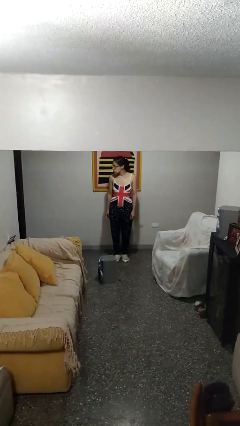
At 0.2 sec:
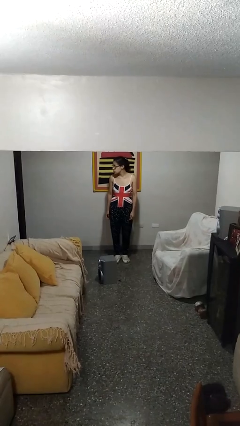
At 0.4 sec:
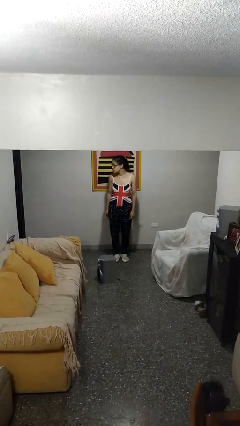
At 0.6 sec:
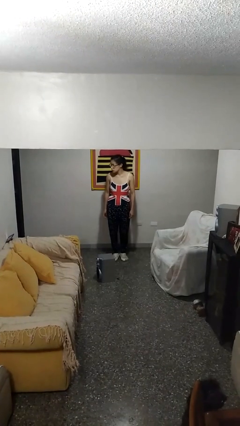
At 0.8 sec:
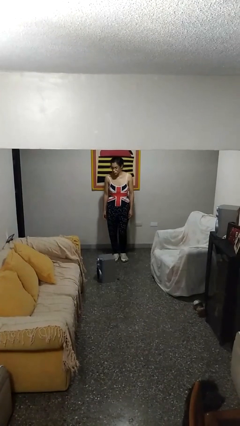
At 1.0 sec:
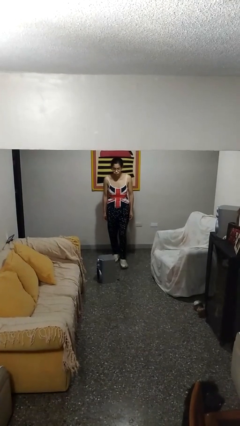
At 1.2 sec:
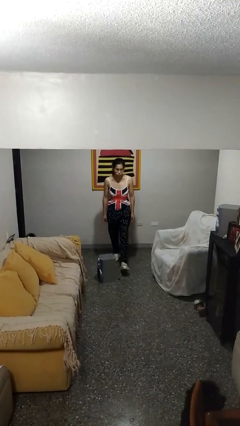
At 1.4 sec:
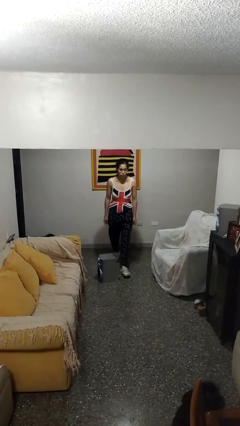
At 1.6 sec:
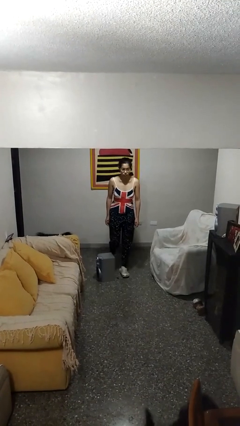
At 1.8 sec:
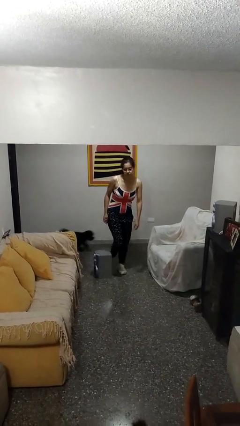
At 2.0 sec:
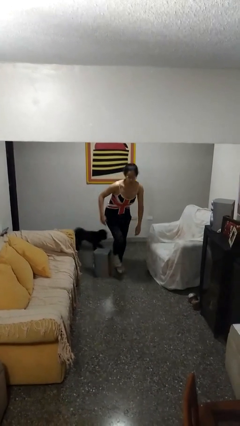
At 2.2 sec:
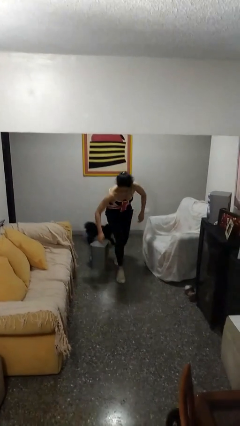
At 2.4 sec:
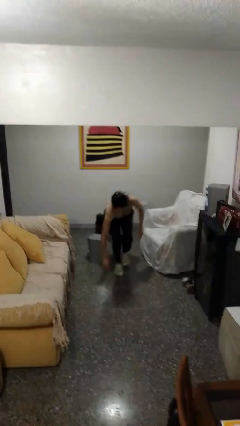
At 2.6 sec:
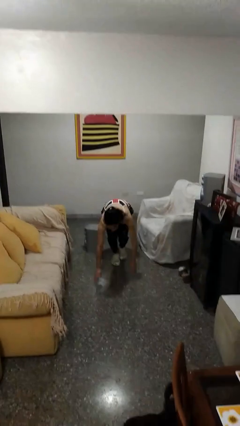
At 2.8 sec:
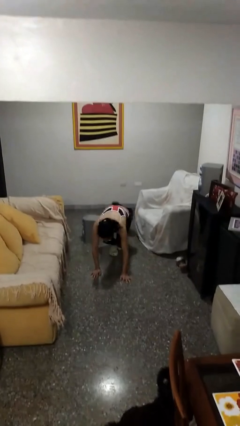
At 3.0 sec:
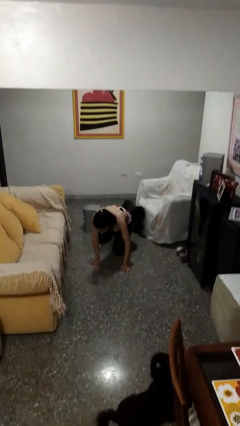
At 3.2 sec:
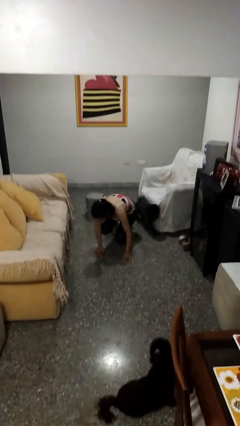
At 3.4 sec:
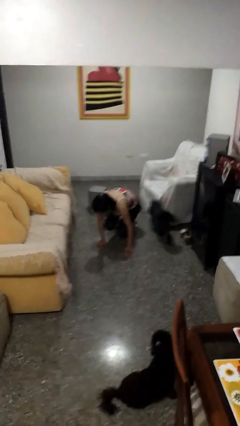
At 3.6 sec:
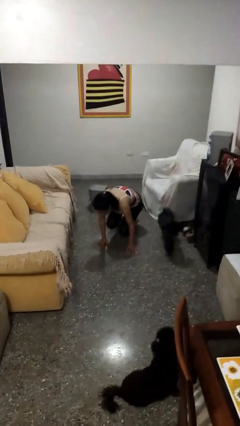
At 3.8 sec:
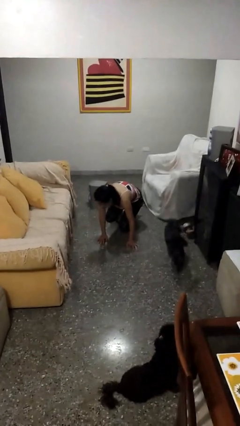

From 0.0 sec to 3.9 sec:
person trips on object on floor

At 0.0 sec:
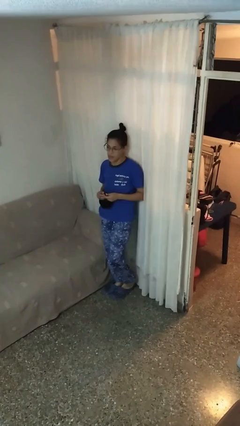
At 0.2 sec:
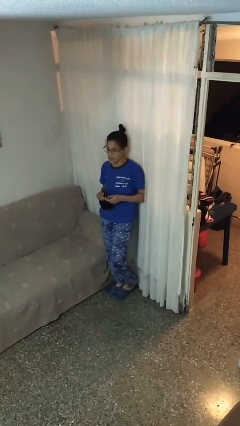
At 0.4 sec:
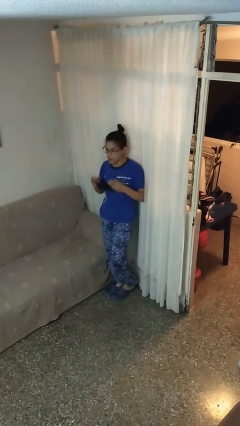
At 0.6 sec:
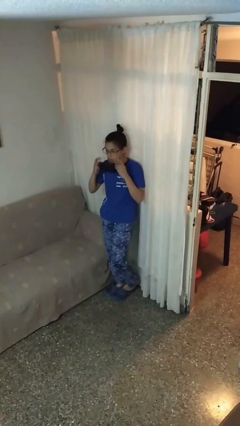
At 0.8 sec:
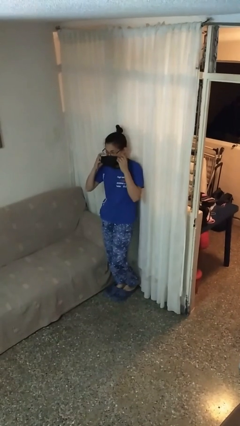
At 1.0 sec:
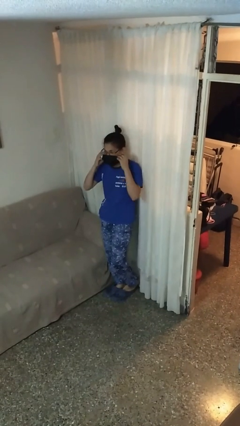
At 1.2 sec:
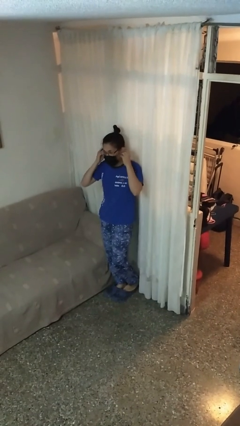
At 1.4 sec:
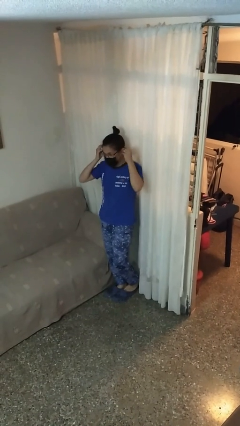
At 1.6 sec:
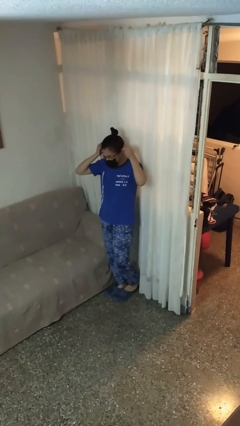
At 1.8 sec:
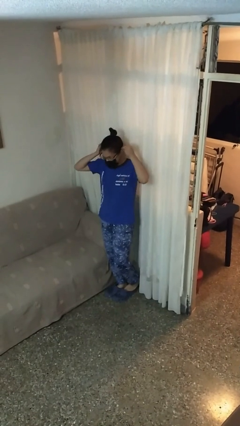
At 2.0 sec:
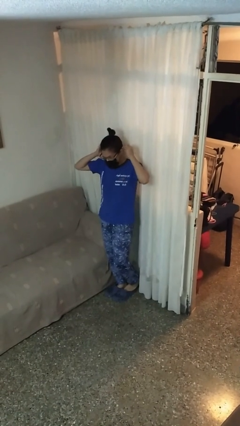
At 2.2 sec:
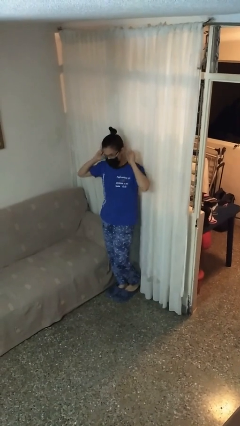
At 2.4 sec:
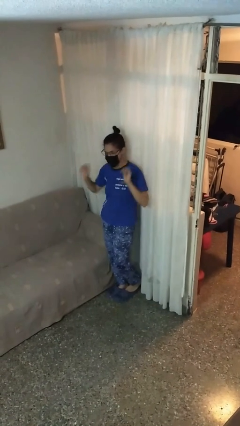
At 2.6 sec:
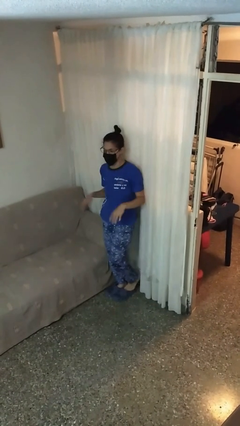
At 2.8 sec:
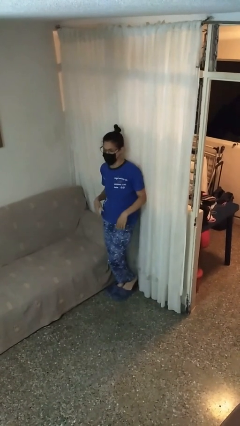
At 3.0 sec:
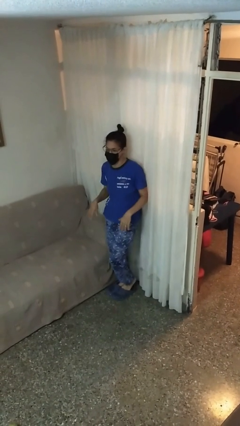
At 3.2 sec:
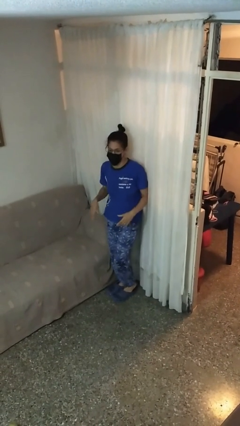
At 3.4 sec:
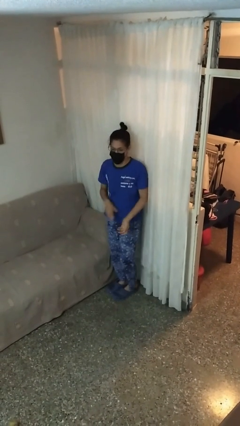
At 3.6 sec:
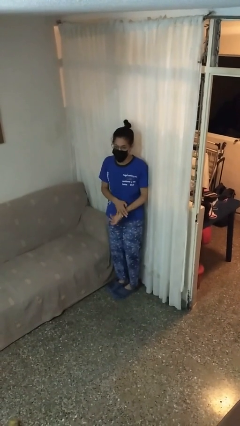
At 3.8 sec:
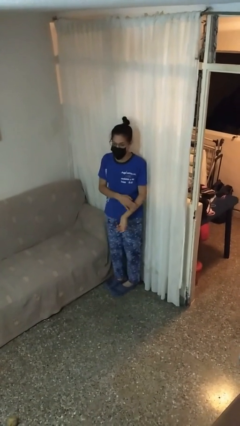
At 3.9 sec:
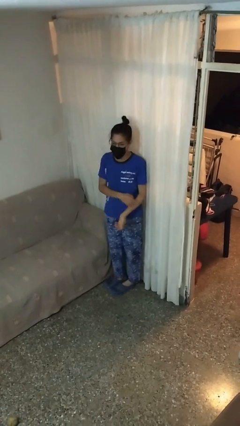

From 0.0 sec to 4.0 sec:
person puts on facemask

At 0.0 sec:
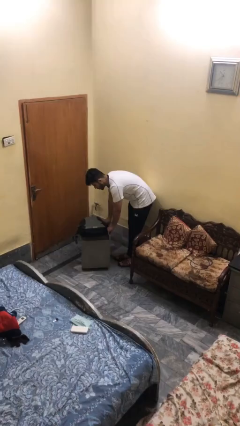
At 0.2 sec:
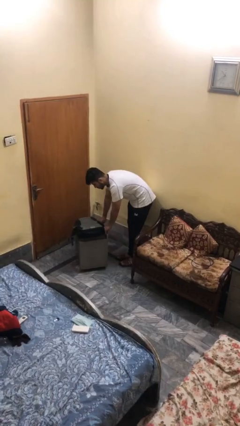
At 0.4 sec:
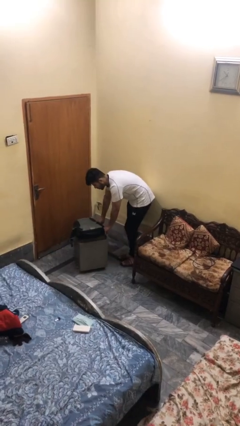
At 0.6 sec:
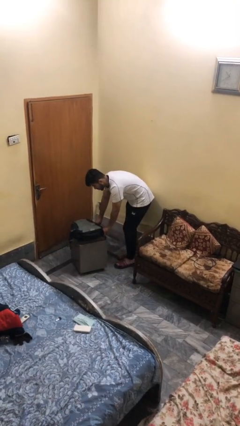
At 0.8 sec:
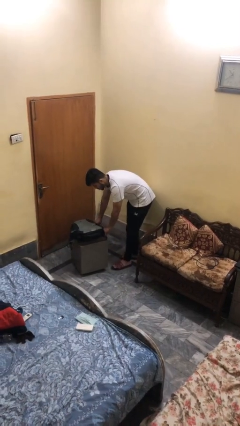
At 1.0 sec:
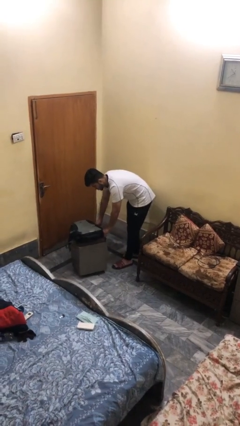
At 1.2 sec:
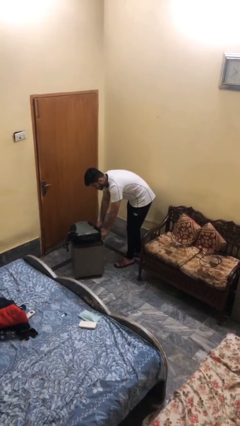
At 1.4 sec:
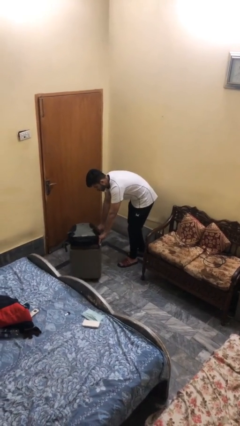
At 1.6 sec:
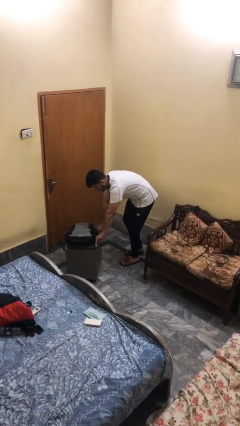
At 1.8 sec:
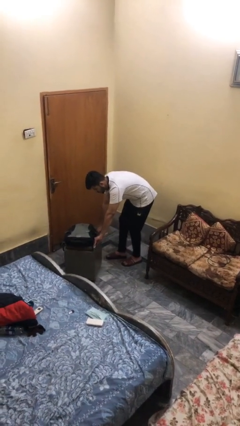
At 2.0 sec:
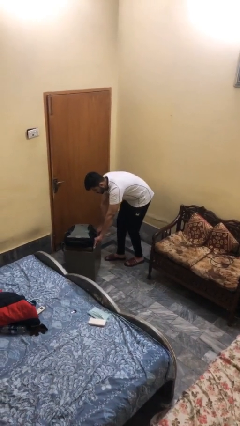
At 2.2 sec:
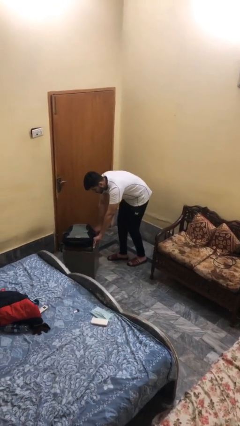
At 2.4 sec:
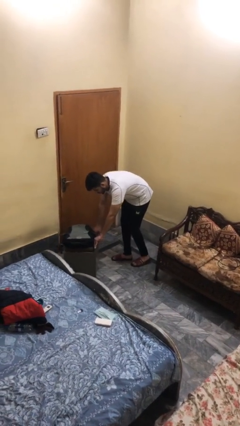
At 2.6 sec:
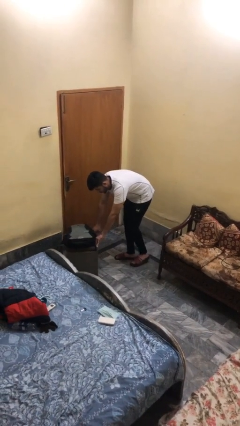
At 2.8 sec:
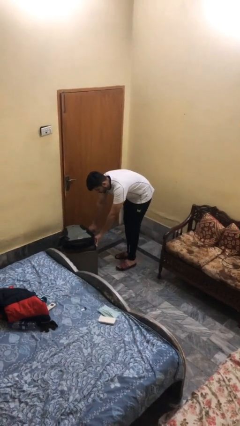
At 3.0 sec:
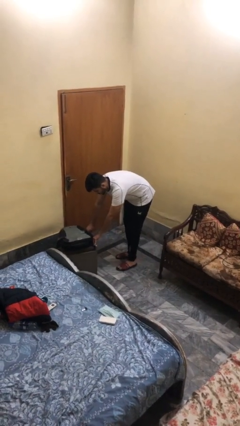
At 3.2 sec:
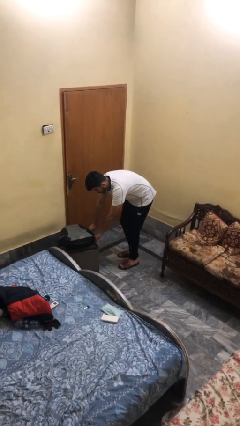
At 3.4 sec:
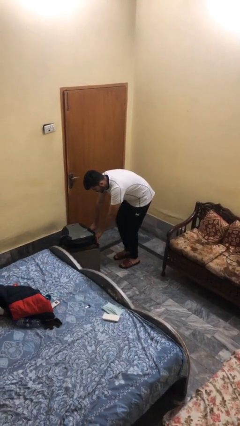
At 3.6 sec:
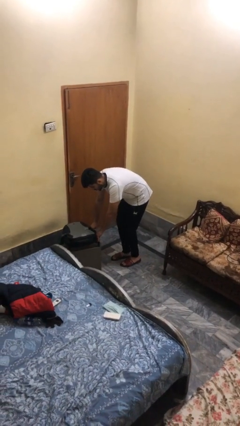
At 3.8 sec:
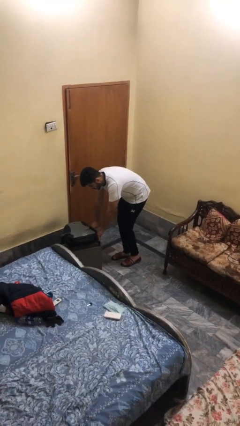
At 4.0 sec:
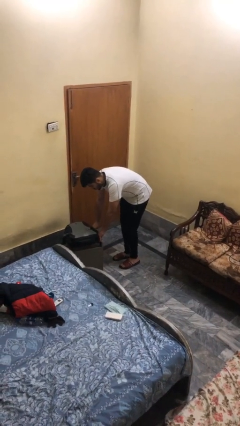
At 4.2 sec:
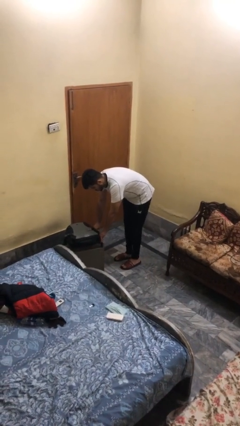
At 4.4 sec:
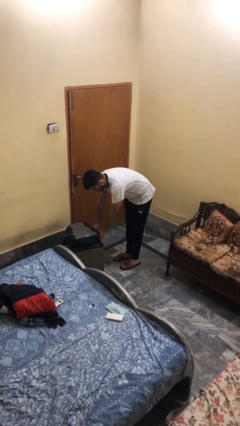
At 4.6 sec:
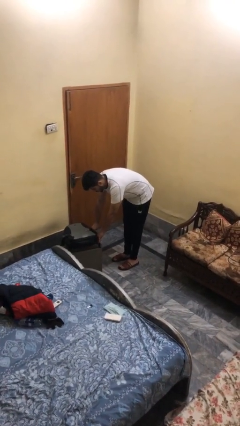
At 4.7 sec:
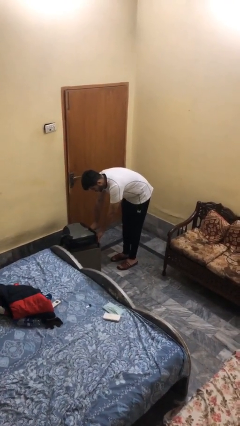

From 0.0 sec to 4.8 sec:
person pushes wheeled cart

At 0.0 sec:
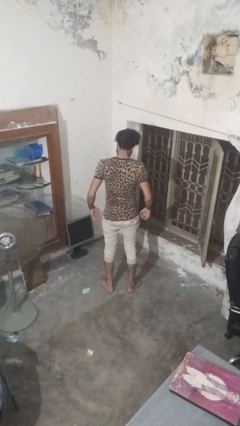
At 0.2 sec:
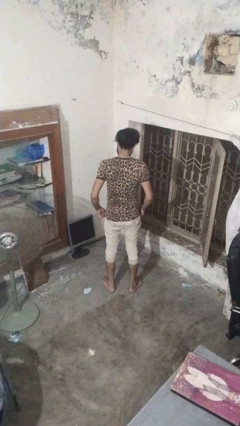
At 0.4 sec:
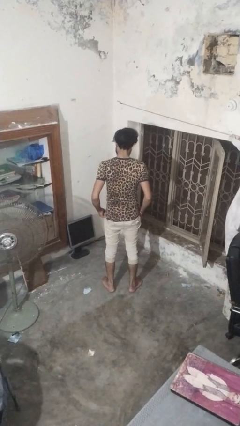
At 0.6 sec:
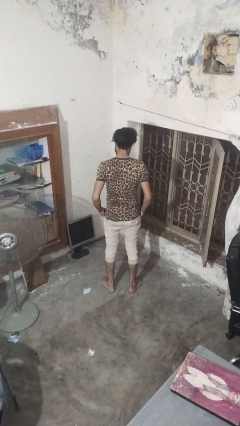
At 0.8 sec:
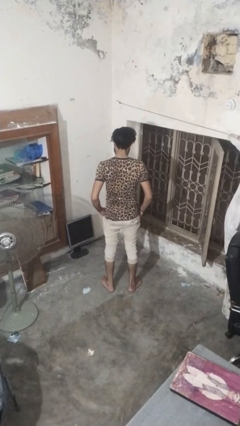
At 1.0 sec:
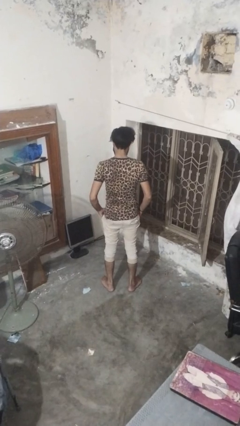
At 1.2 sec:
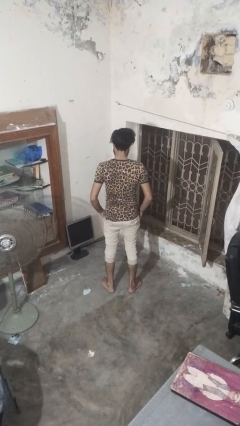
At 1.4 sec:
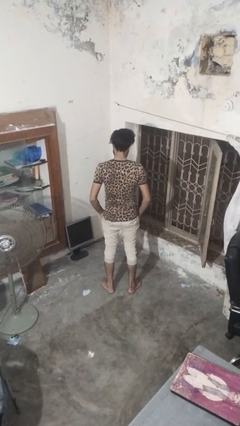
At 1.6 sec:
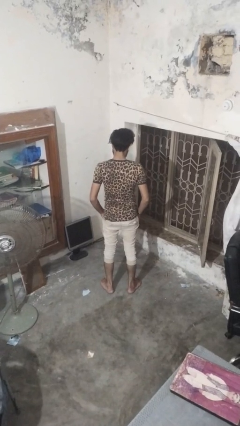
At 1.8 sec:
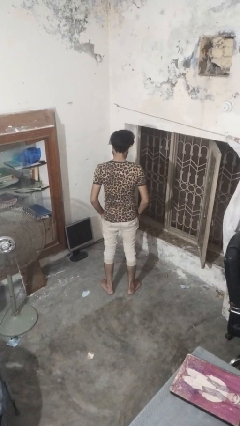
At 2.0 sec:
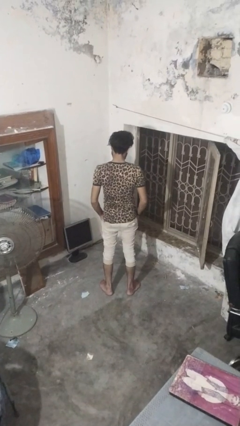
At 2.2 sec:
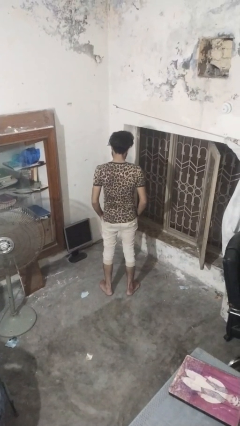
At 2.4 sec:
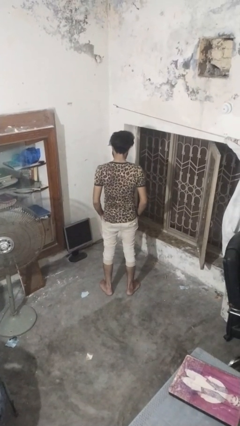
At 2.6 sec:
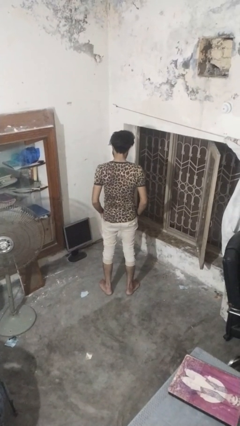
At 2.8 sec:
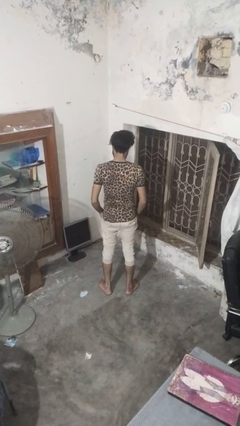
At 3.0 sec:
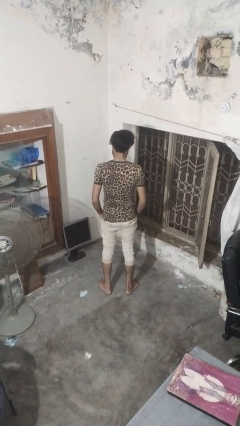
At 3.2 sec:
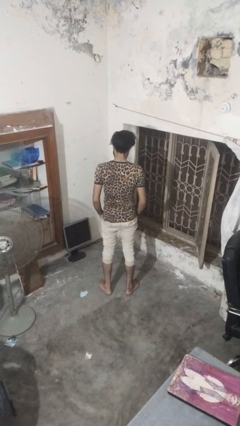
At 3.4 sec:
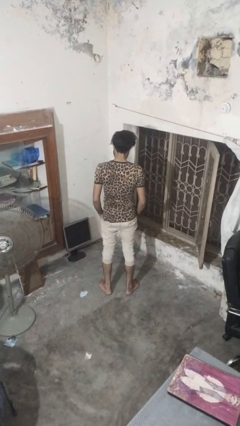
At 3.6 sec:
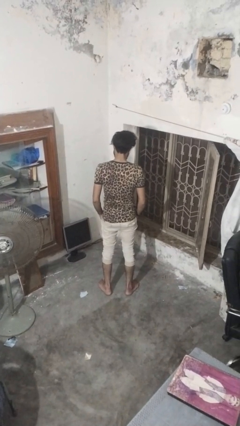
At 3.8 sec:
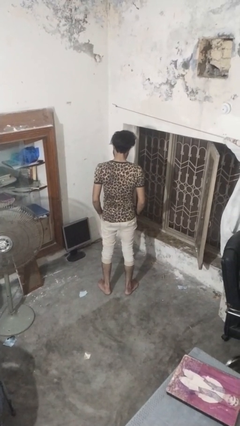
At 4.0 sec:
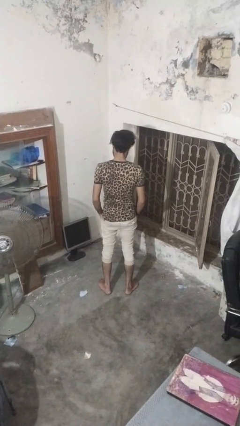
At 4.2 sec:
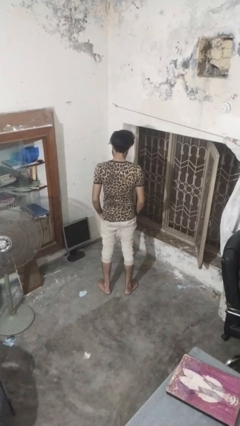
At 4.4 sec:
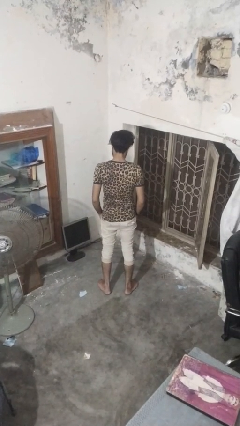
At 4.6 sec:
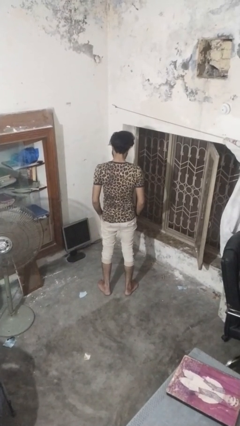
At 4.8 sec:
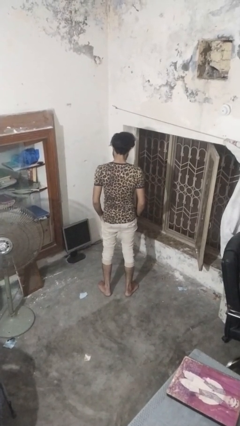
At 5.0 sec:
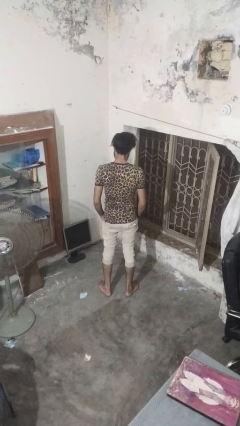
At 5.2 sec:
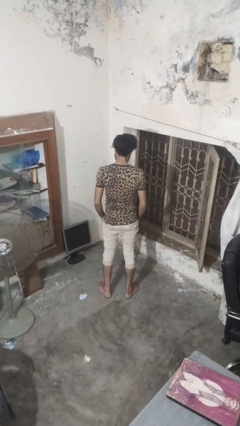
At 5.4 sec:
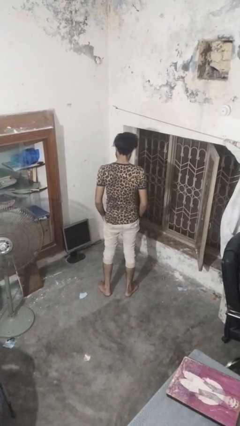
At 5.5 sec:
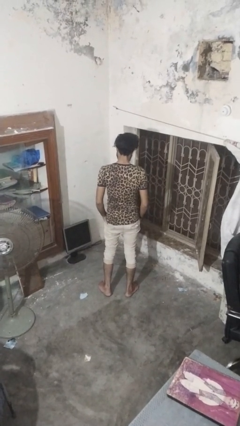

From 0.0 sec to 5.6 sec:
person puts hands in back pockets
